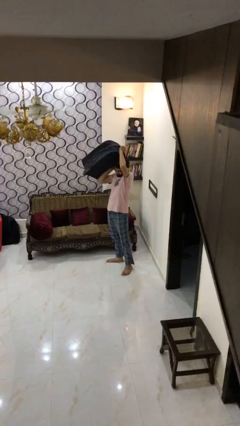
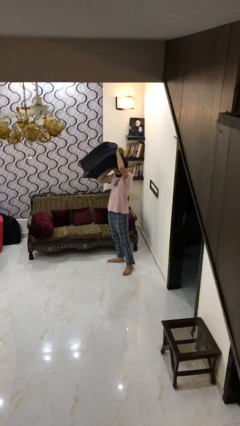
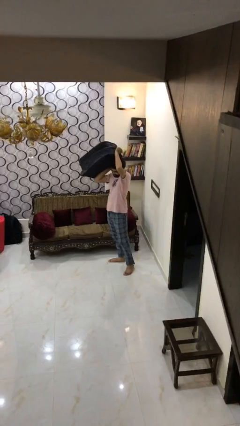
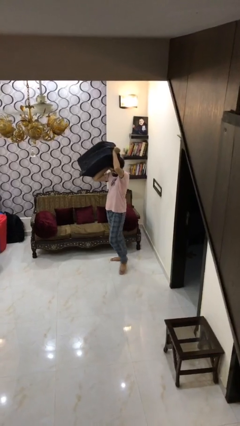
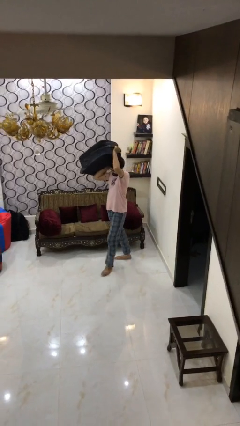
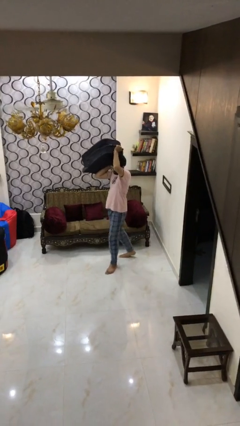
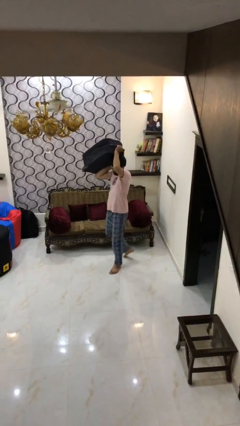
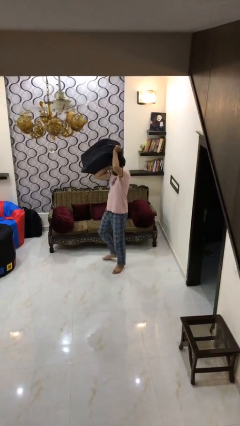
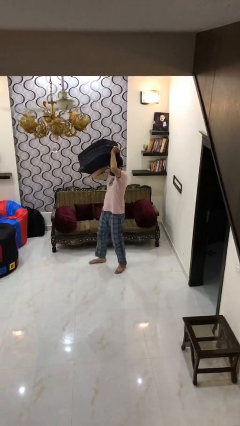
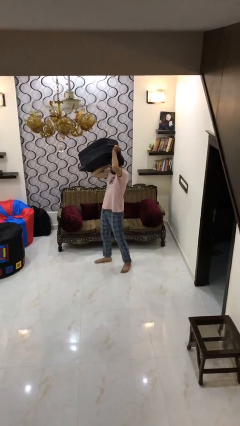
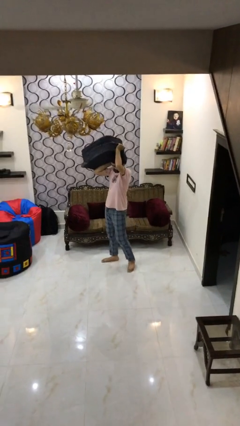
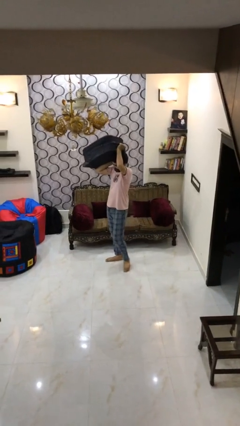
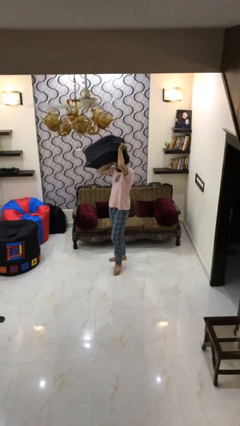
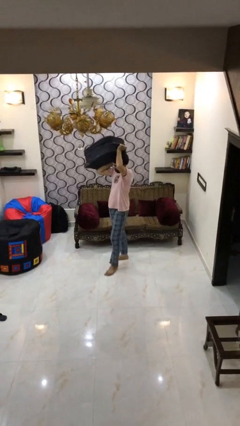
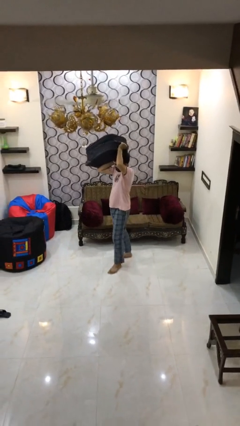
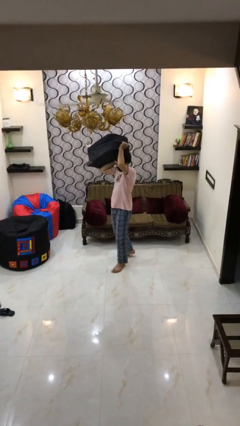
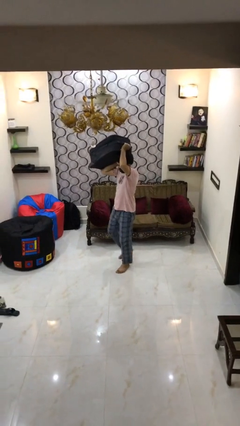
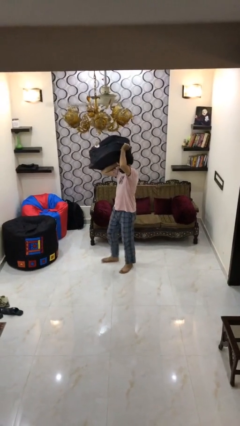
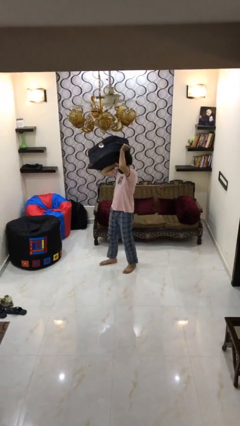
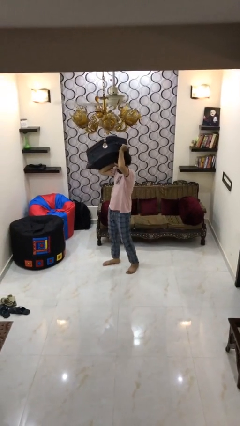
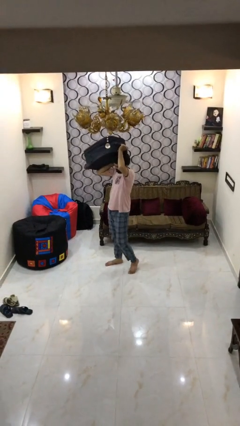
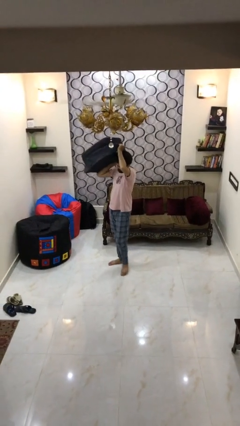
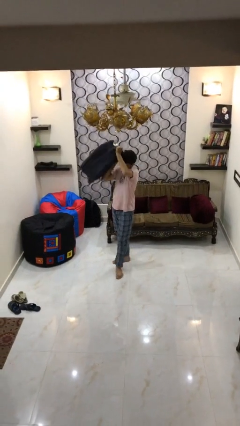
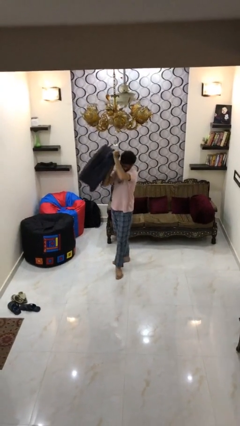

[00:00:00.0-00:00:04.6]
person carries heavy object

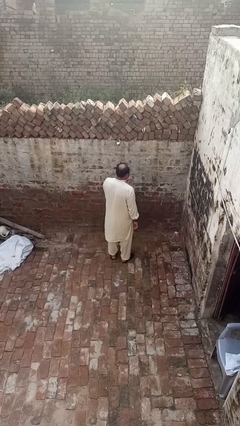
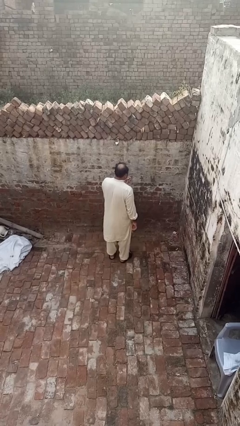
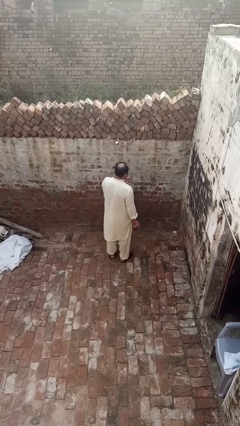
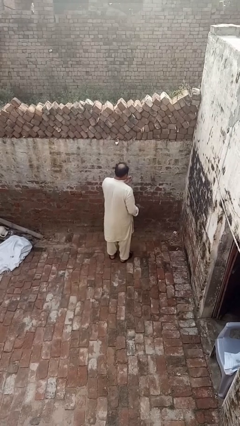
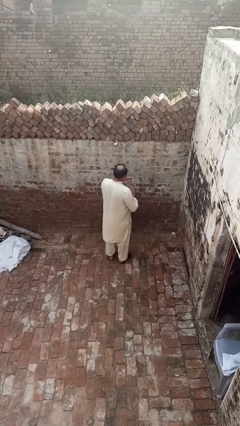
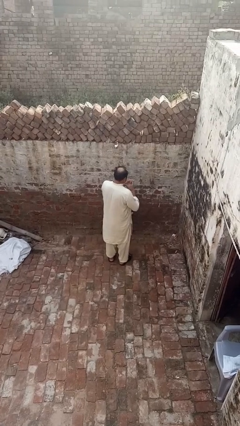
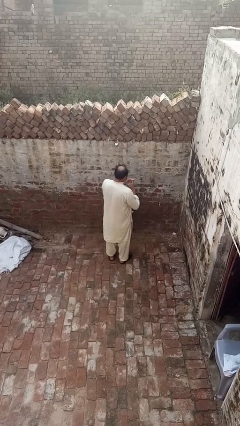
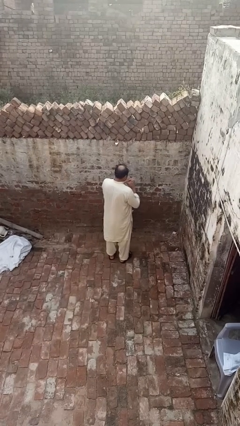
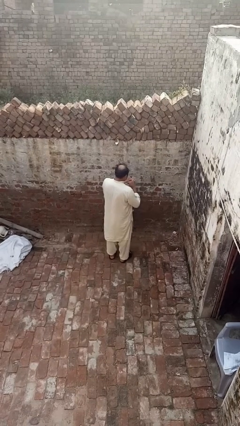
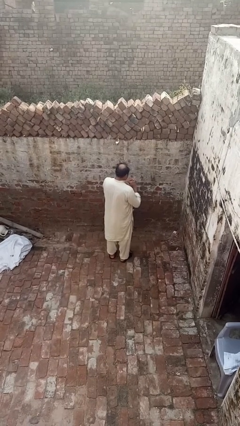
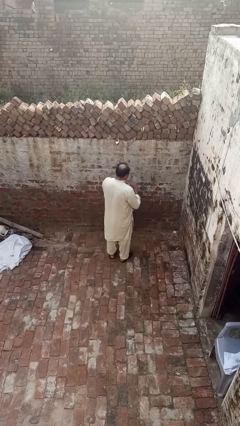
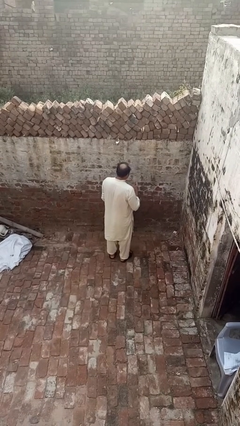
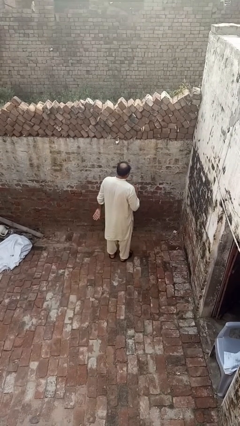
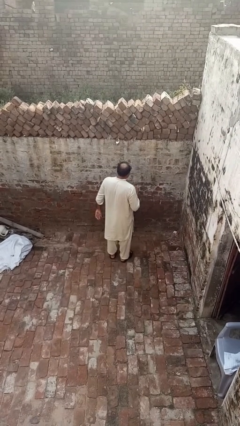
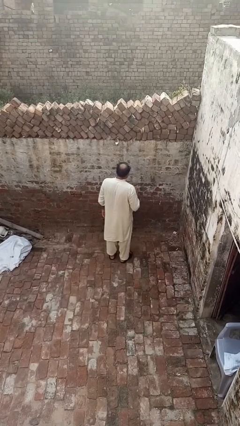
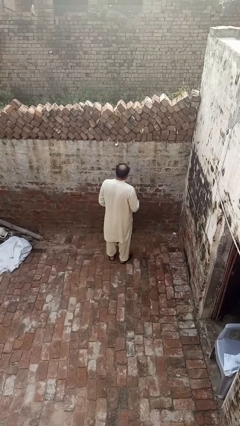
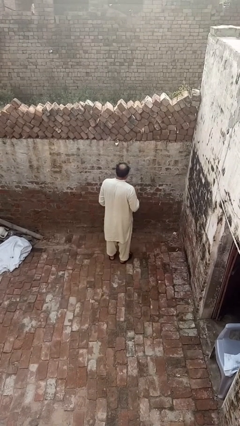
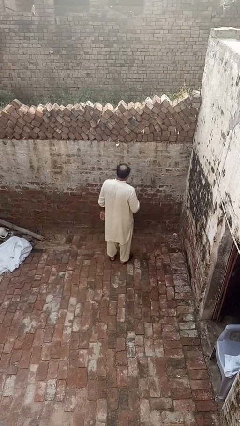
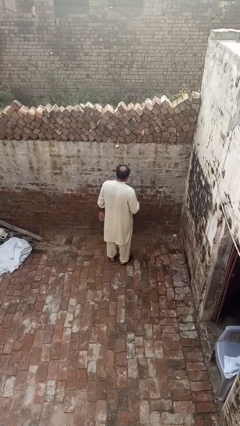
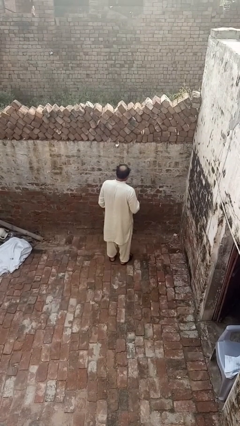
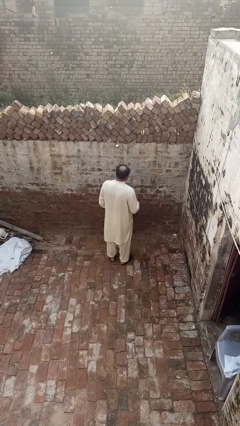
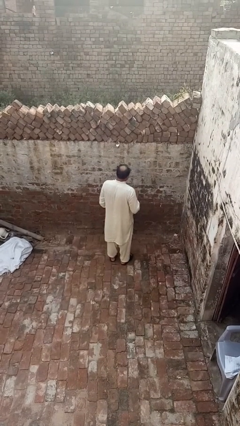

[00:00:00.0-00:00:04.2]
person puts on ring

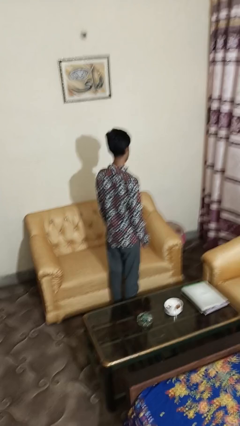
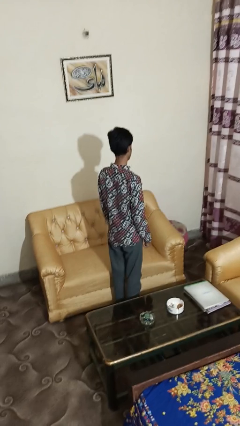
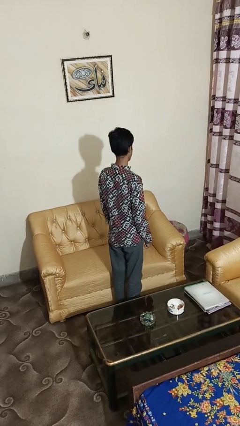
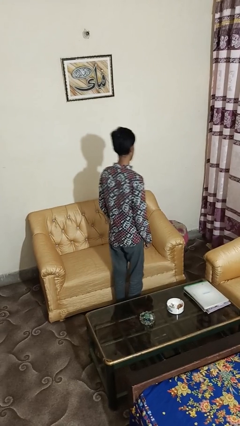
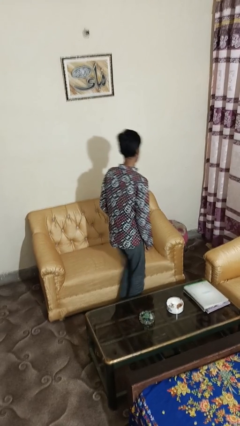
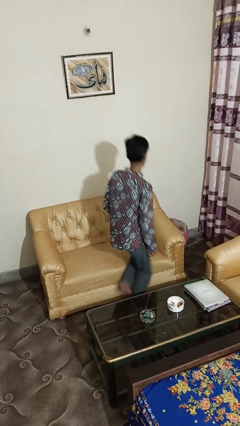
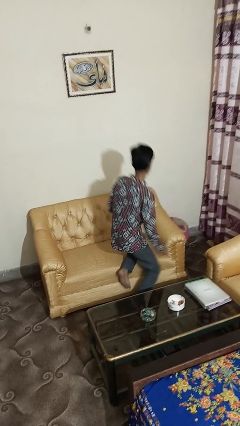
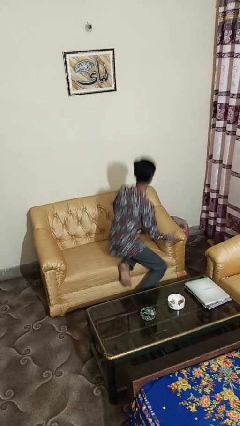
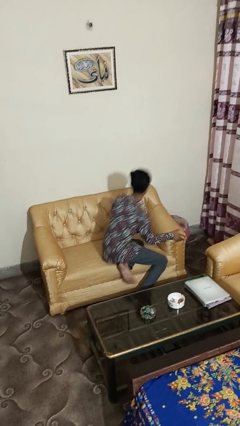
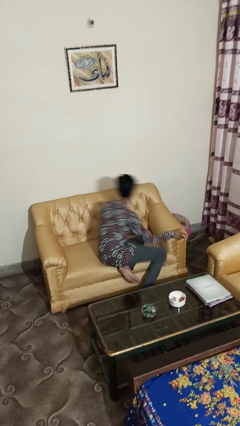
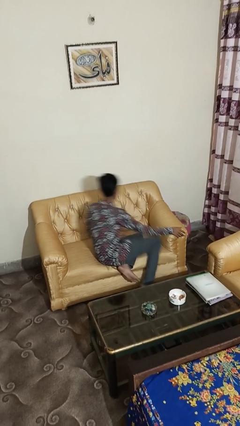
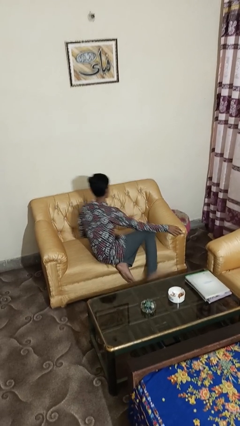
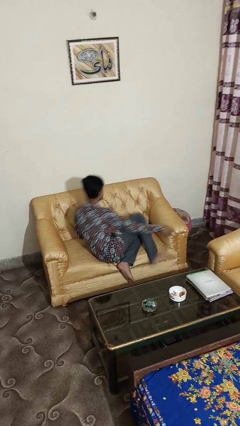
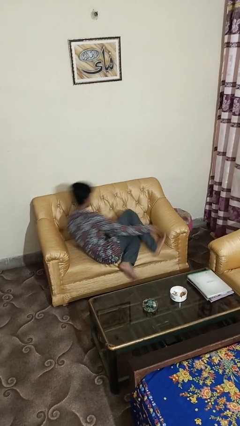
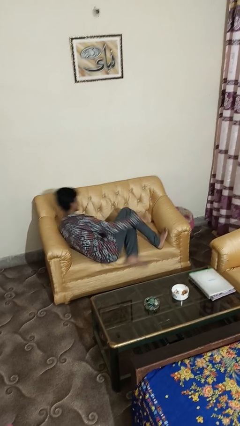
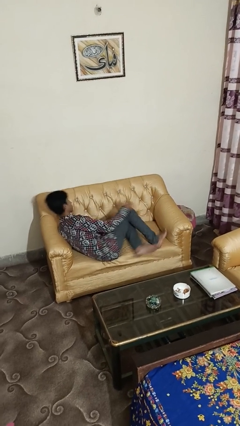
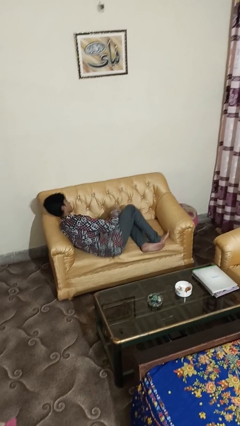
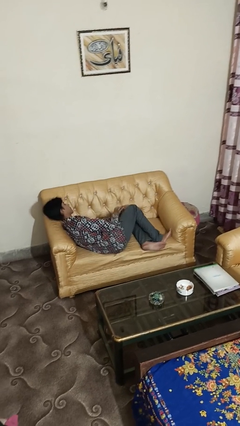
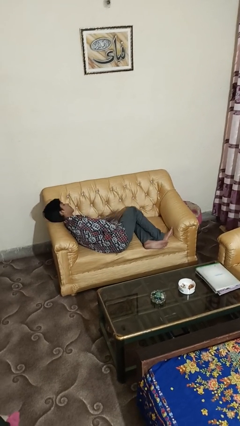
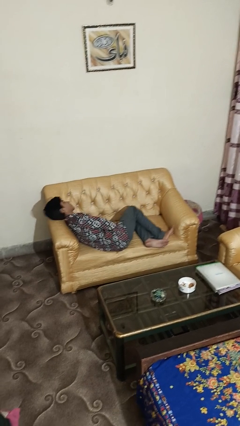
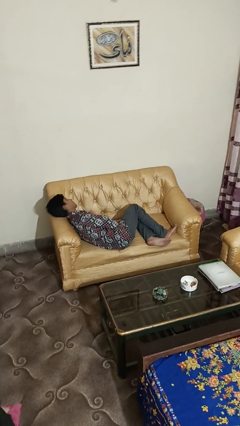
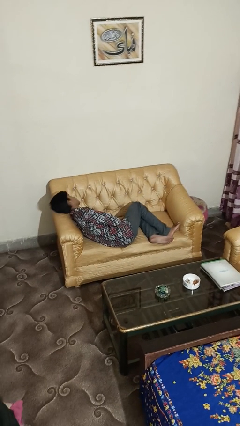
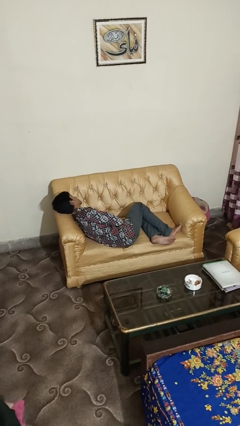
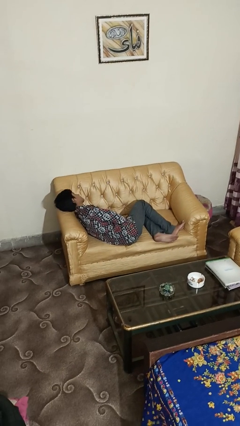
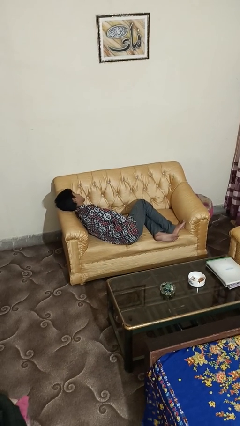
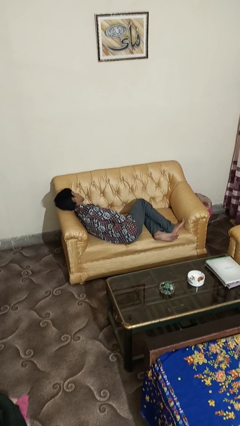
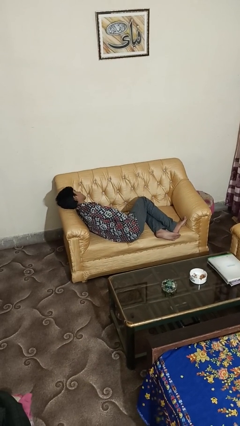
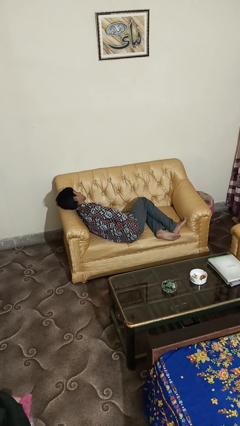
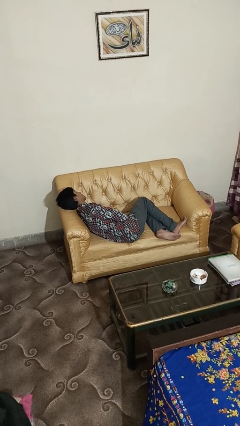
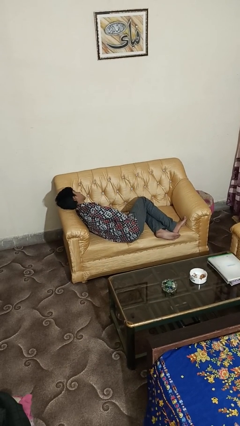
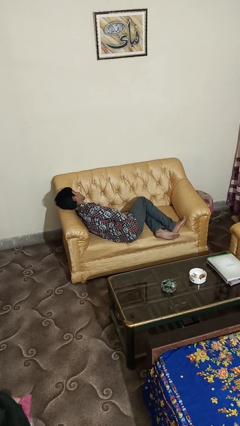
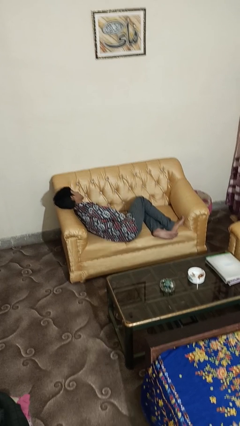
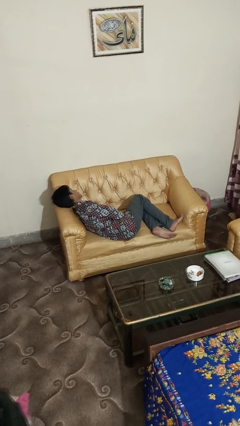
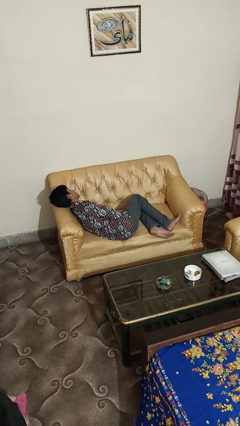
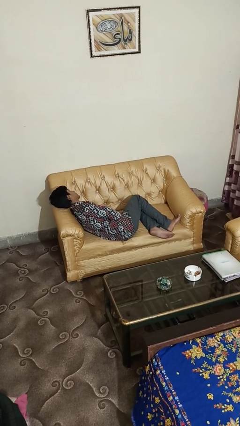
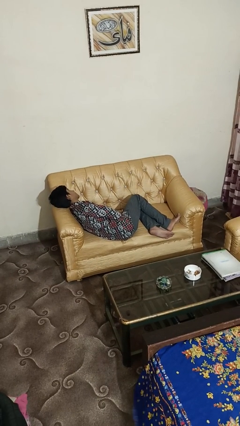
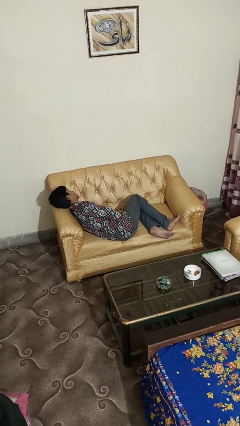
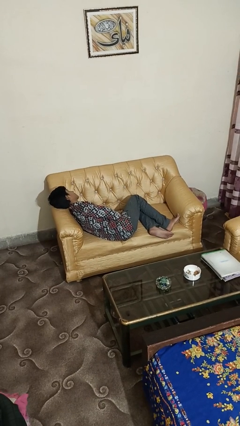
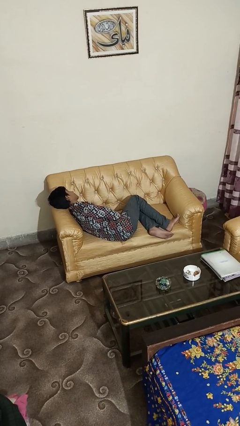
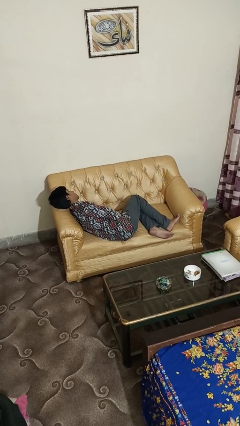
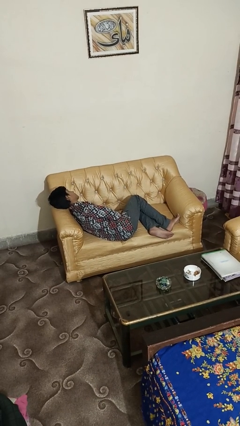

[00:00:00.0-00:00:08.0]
person lies down on couch

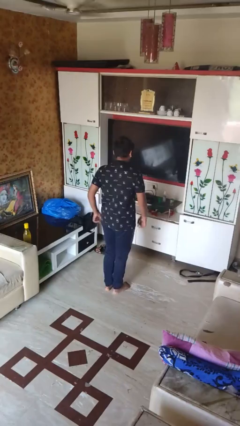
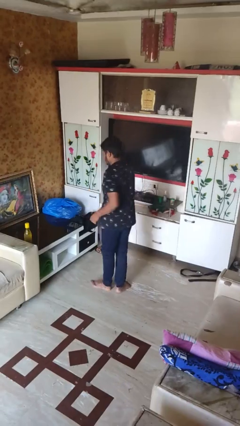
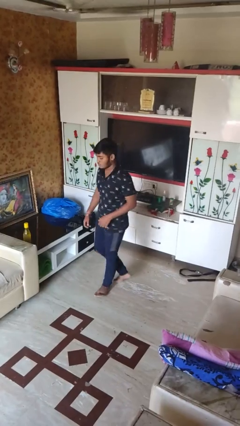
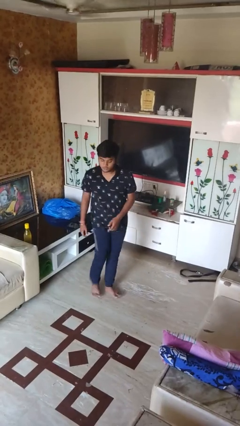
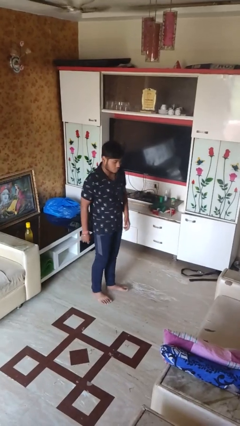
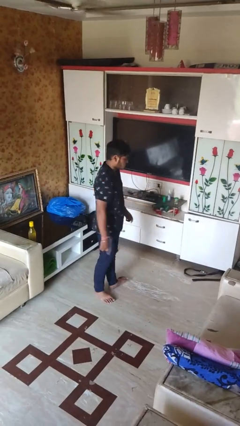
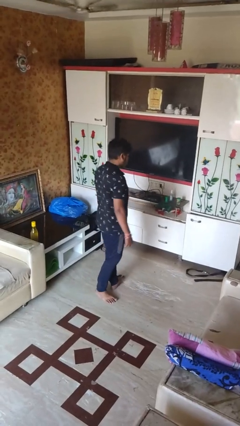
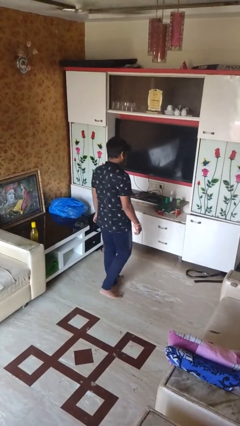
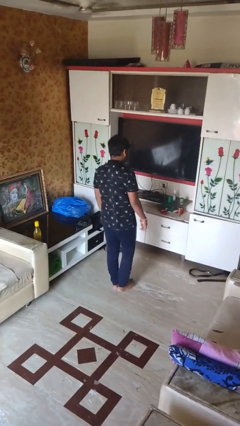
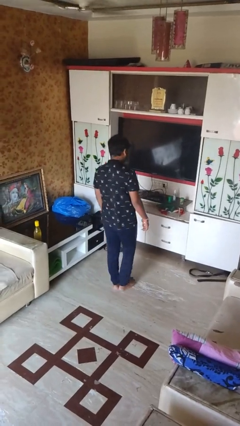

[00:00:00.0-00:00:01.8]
person twirls
